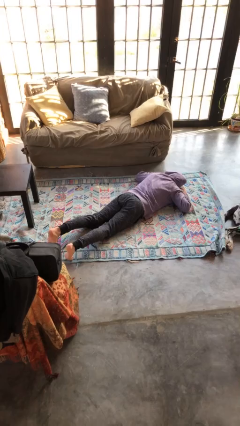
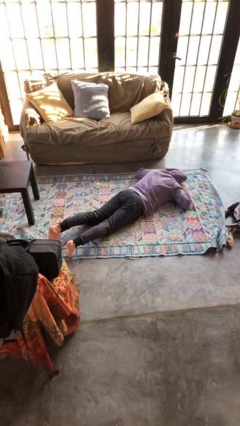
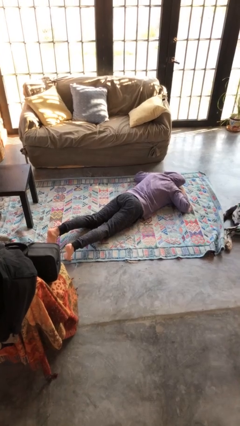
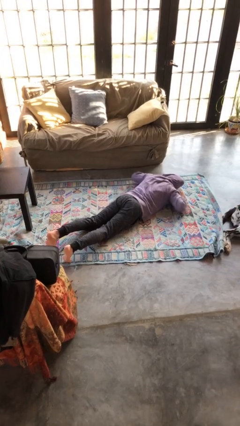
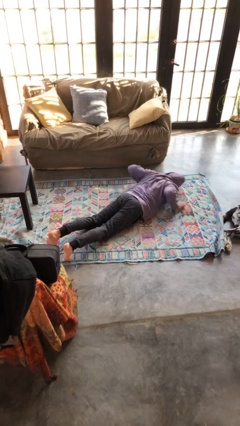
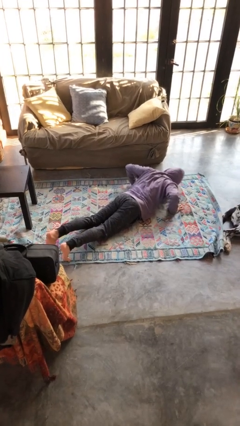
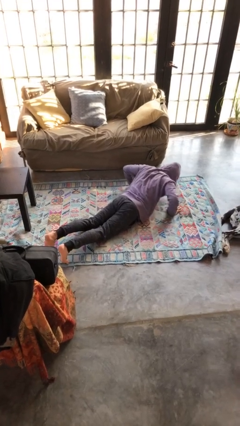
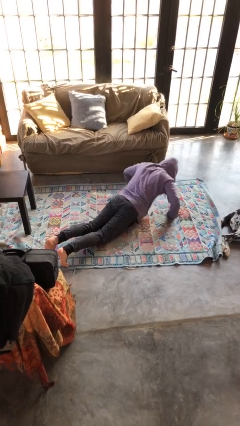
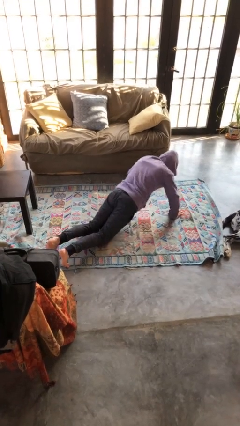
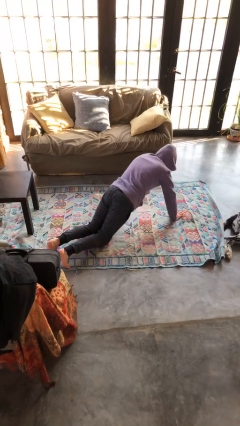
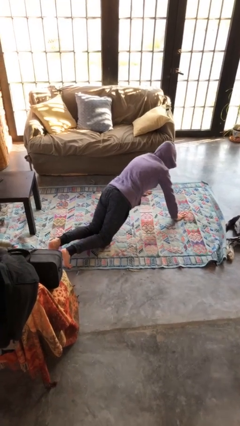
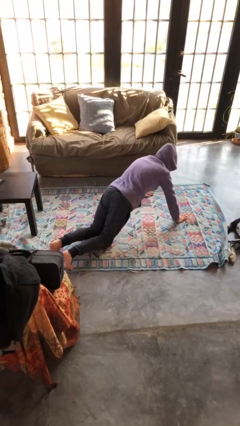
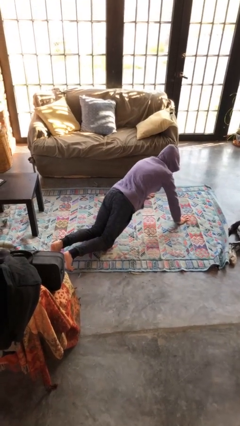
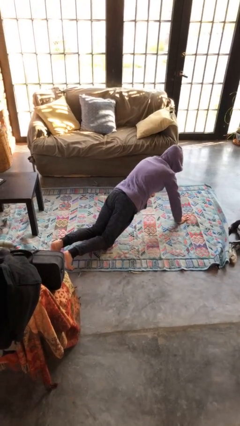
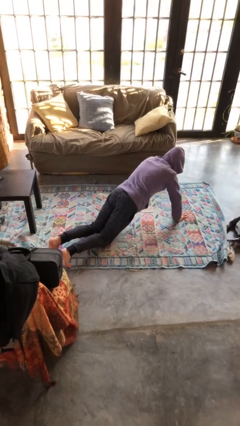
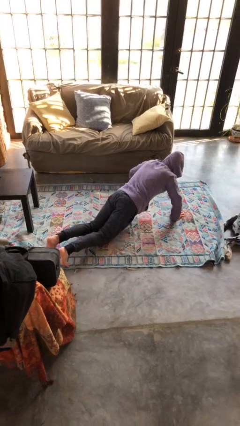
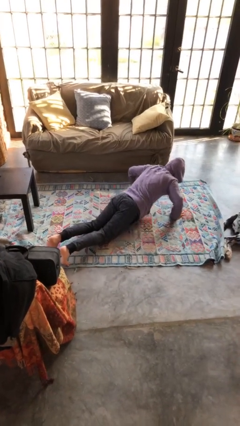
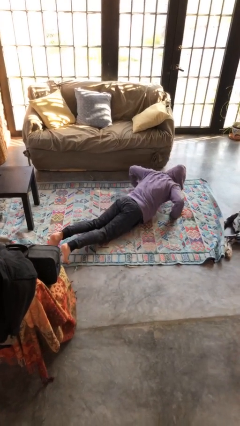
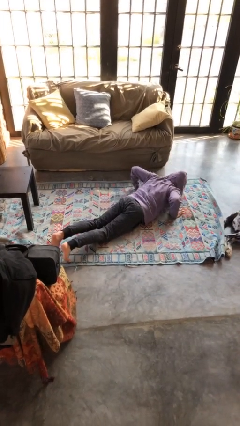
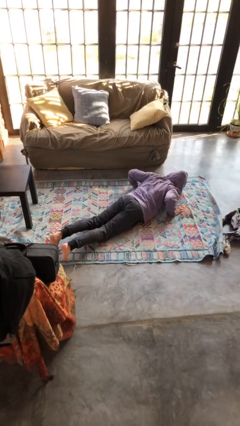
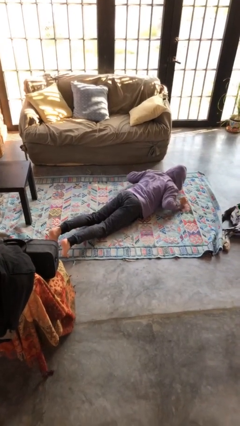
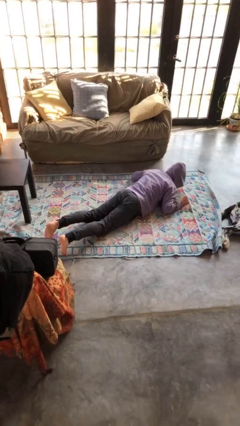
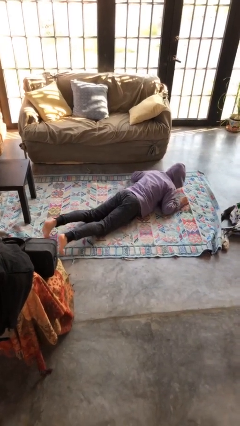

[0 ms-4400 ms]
person exercises with pushup

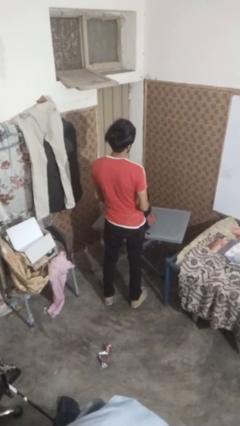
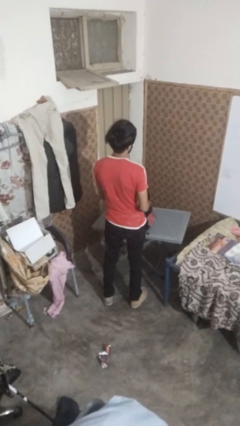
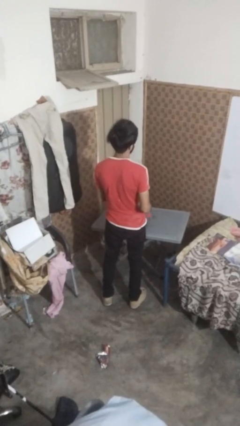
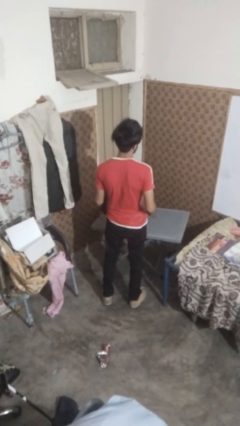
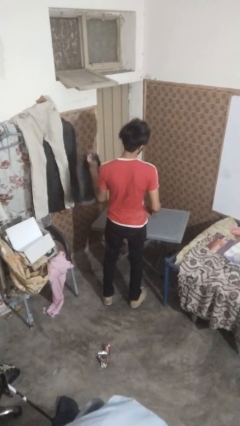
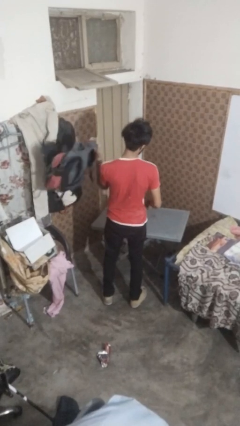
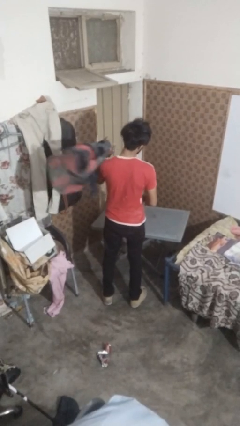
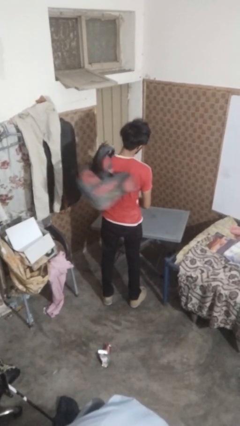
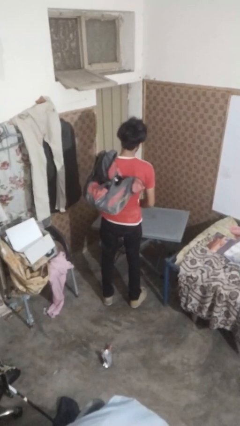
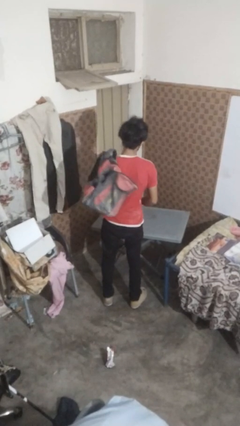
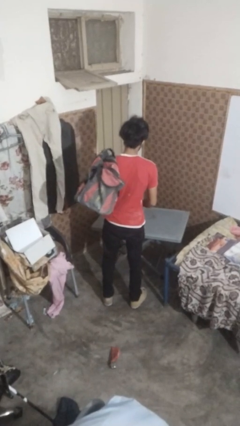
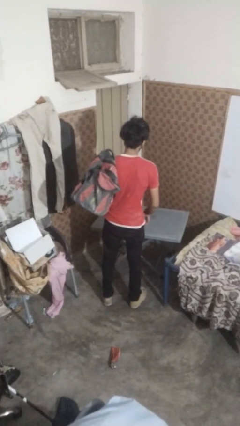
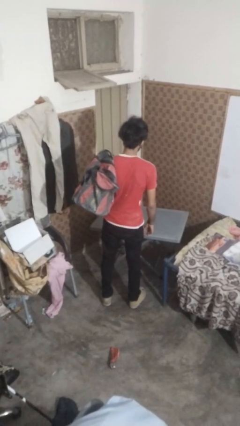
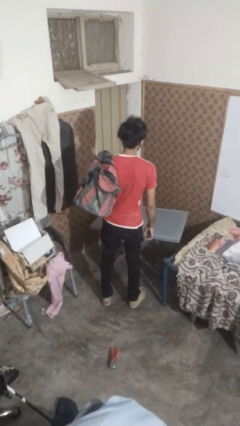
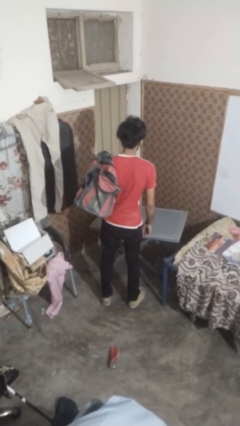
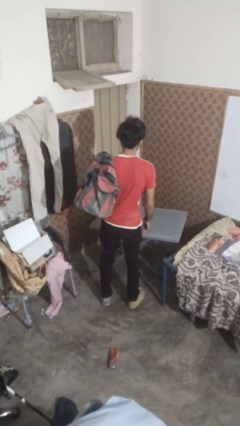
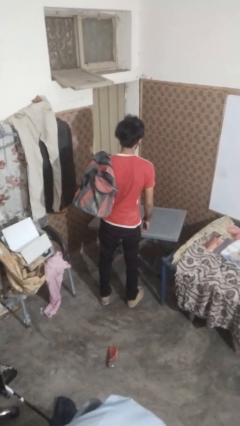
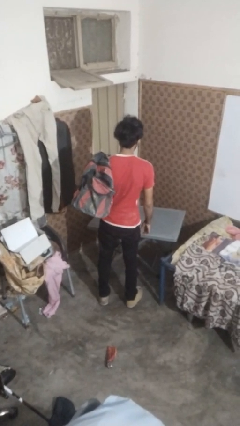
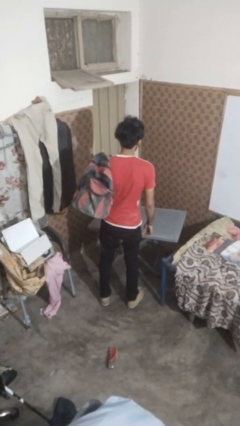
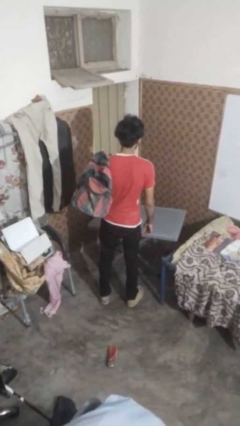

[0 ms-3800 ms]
person puts on backpack

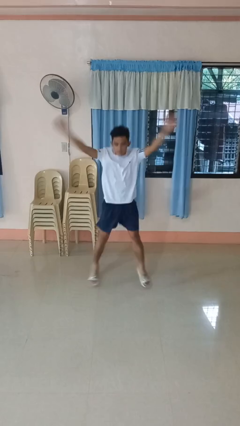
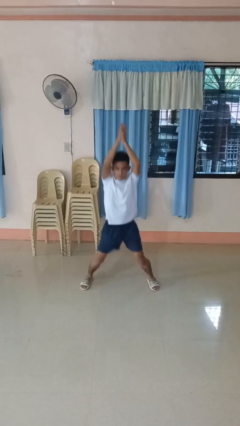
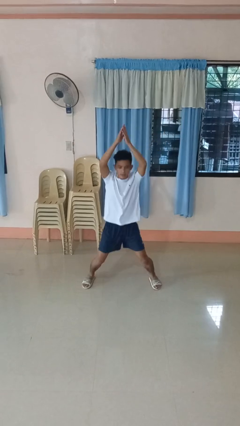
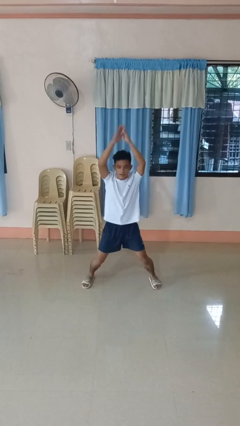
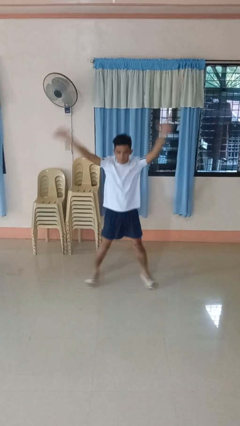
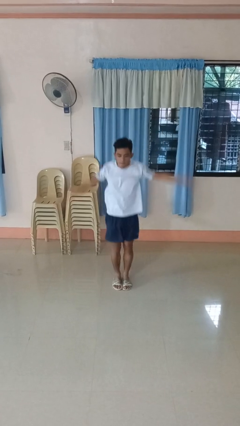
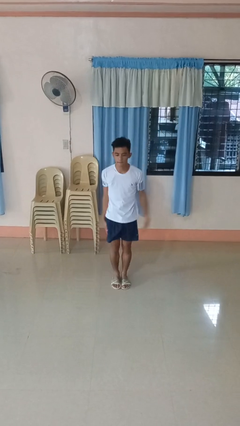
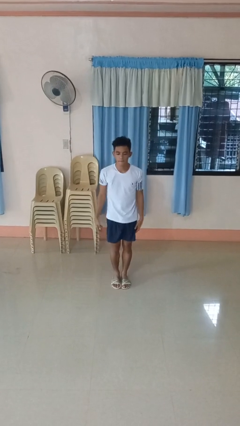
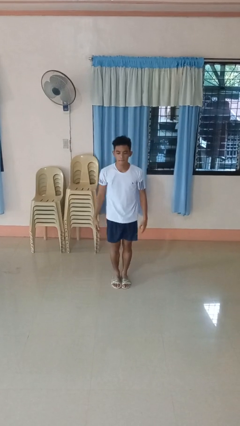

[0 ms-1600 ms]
person exercises with jumping jacks

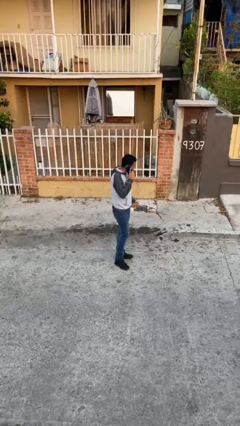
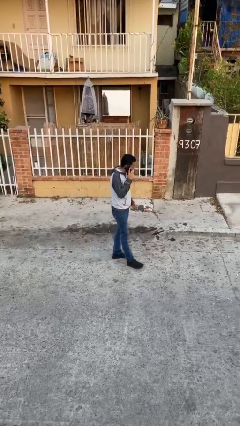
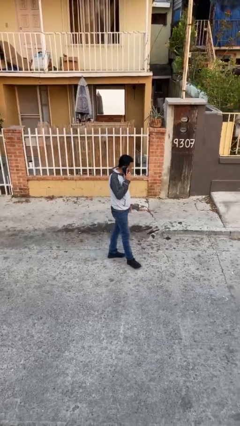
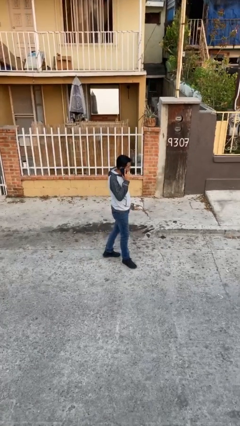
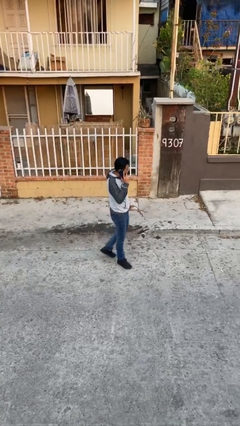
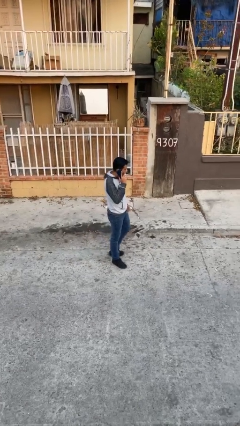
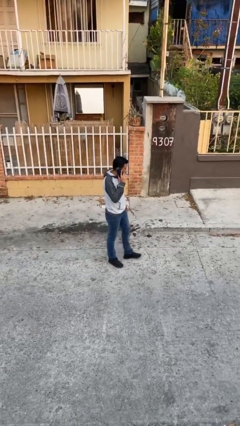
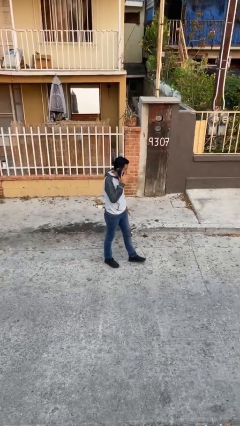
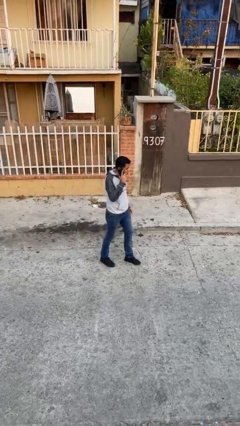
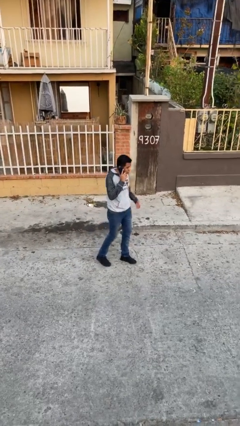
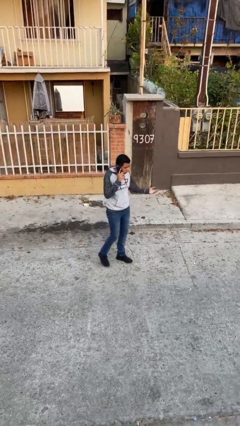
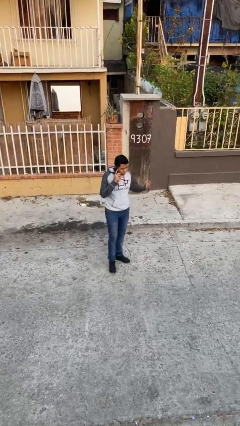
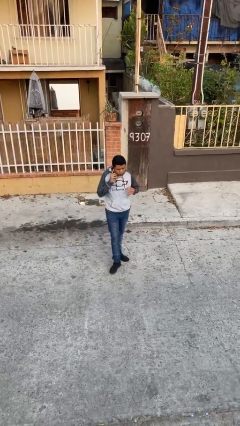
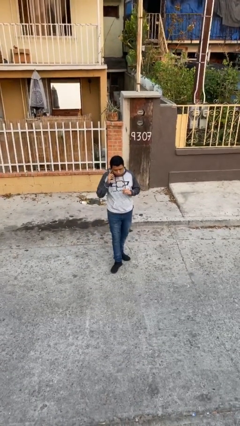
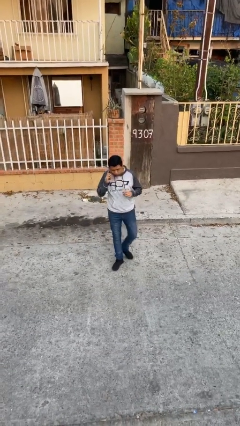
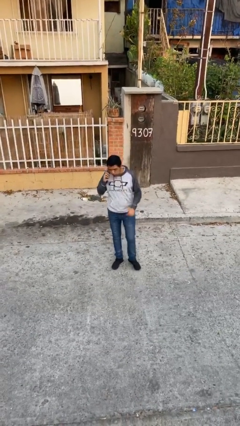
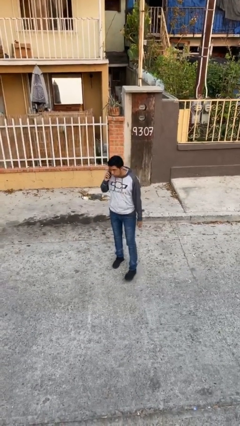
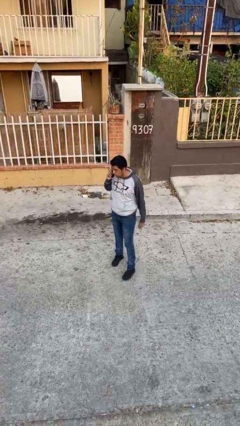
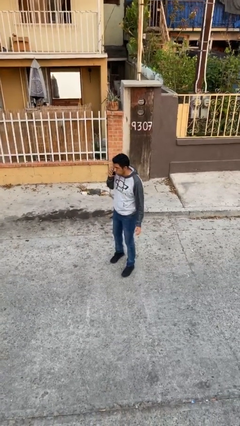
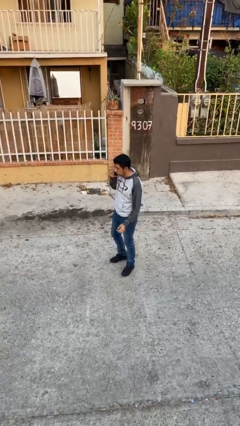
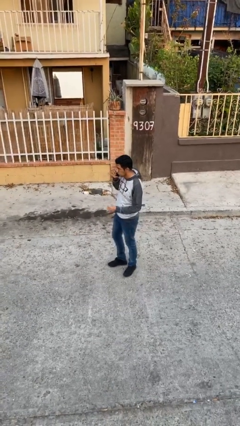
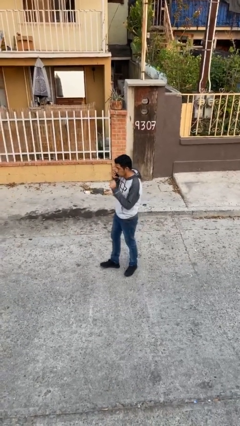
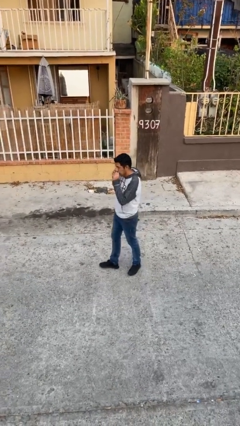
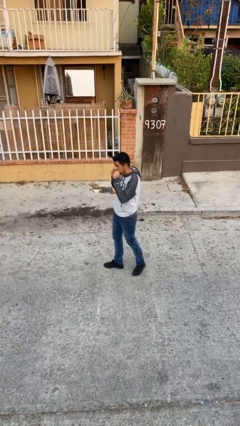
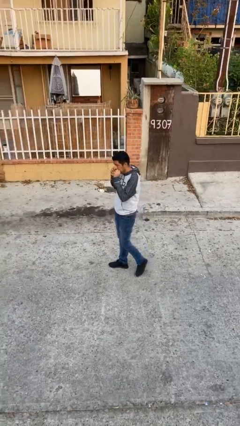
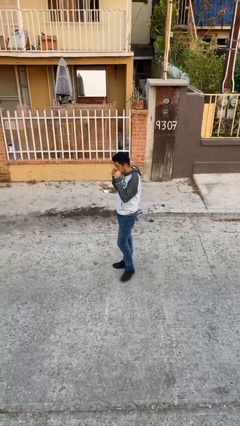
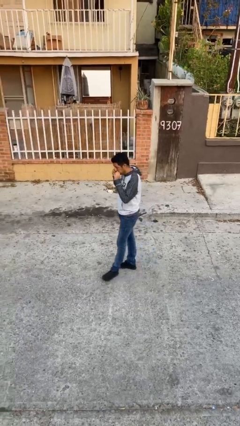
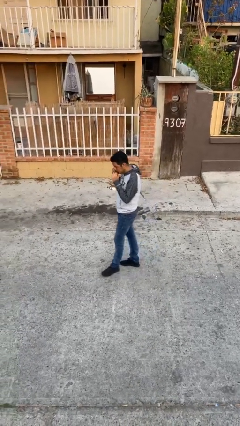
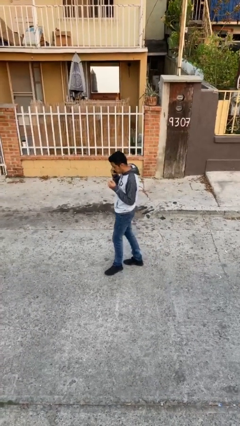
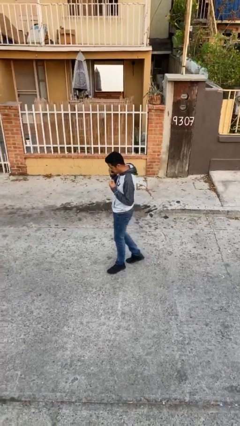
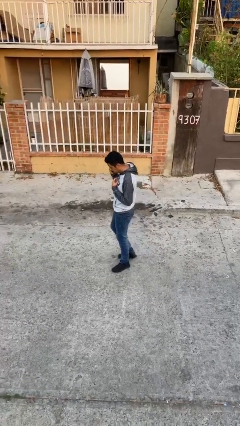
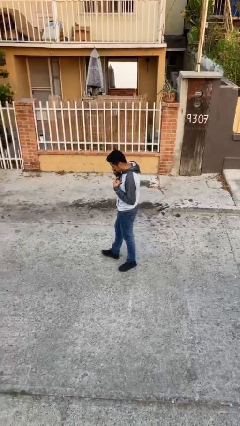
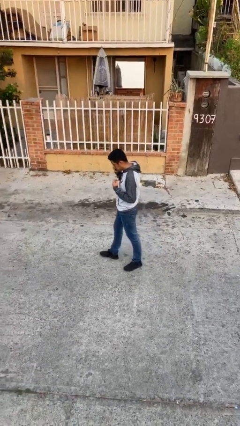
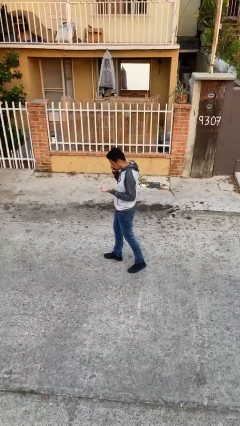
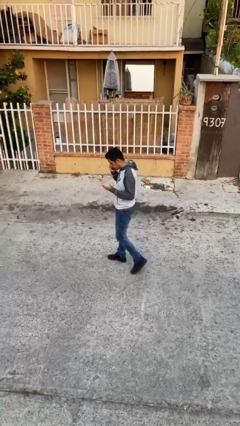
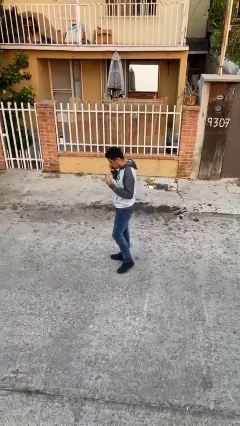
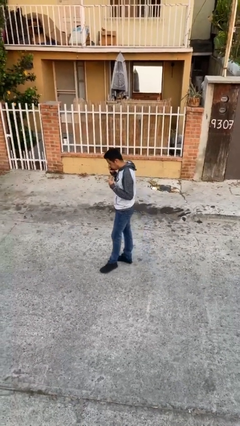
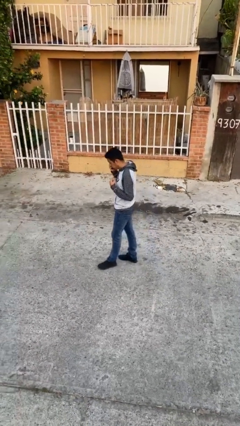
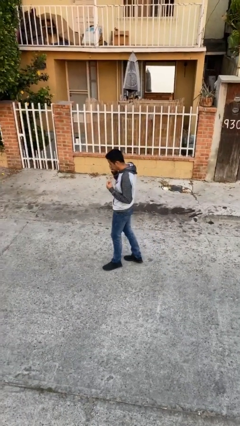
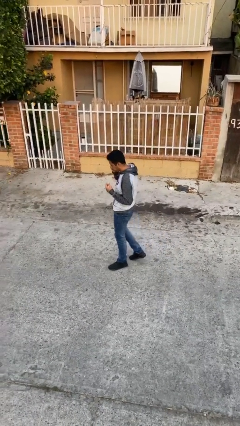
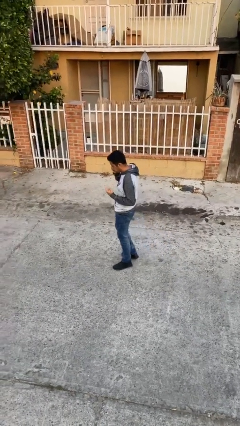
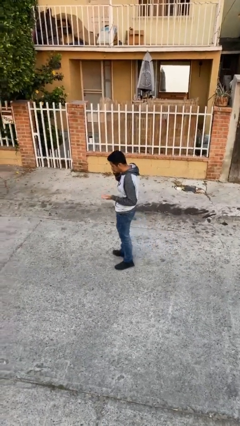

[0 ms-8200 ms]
person talks on phone
